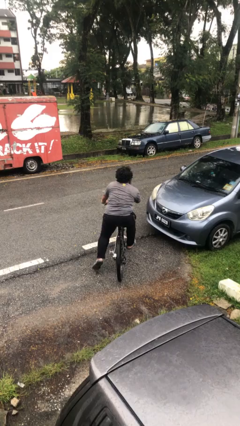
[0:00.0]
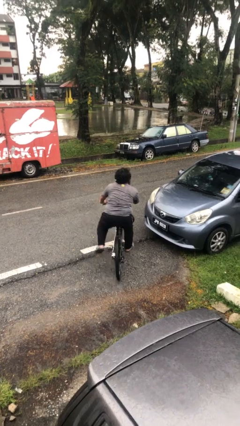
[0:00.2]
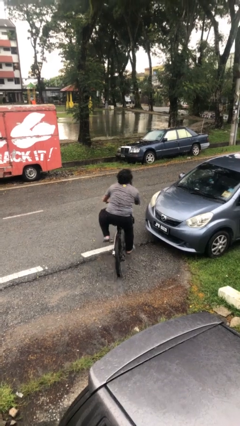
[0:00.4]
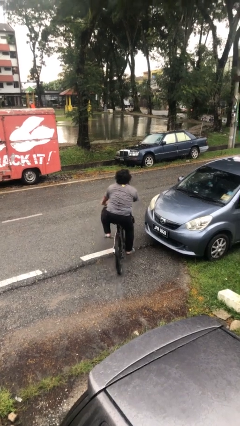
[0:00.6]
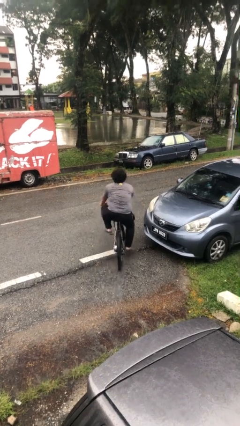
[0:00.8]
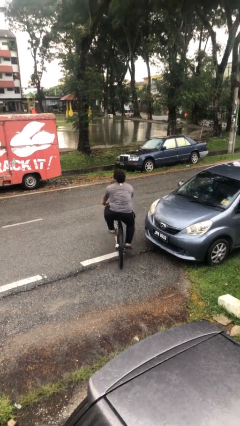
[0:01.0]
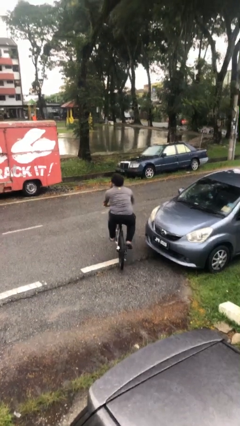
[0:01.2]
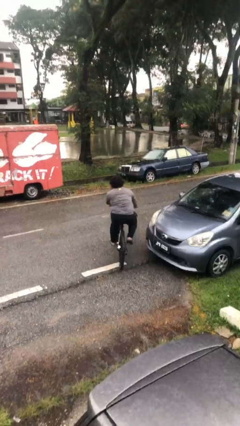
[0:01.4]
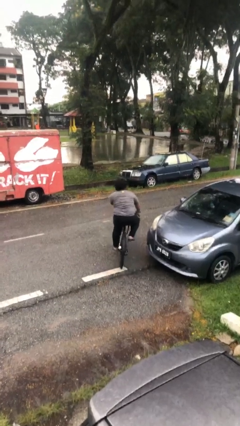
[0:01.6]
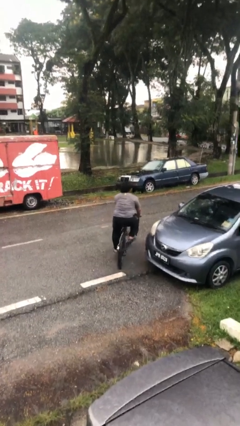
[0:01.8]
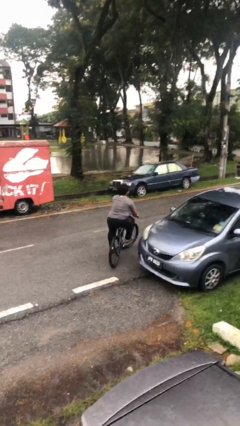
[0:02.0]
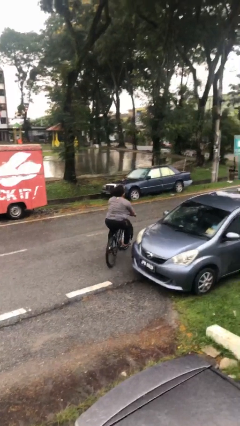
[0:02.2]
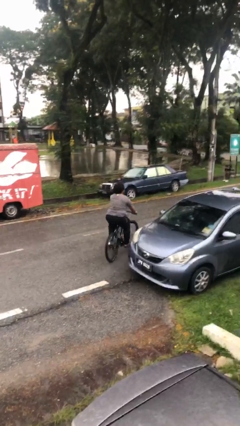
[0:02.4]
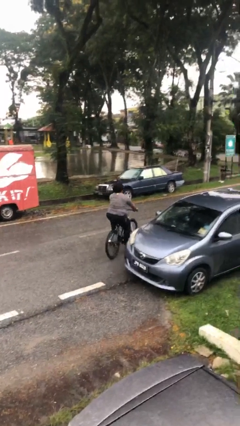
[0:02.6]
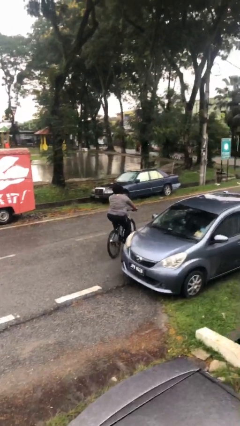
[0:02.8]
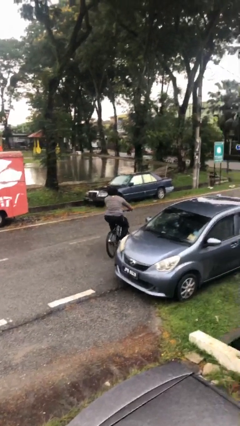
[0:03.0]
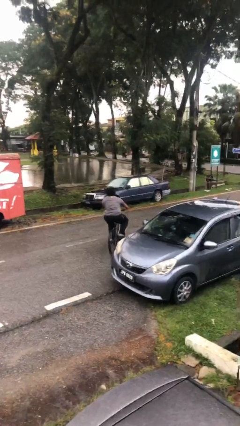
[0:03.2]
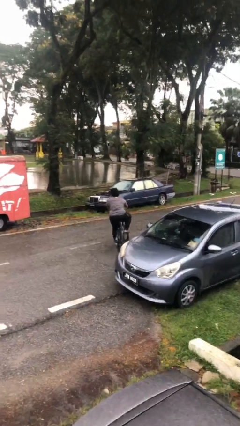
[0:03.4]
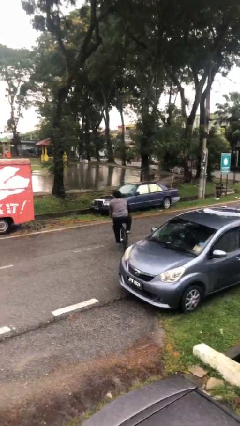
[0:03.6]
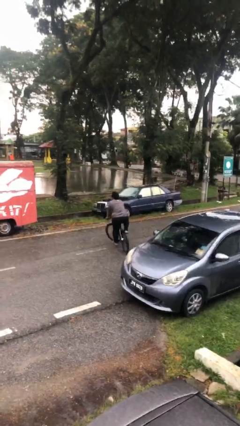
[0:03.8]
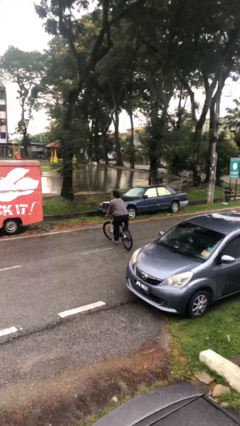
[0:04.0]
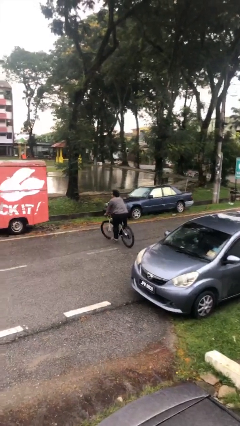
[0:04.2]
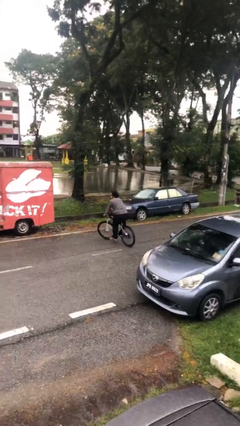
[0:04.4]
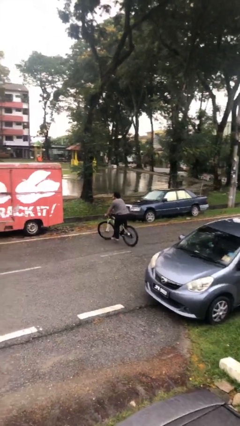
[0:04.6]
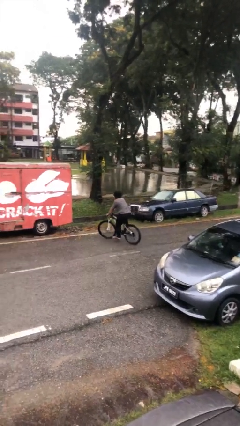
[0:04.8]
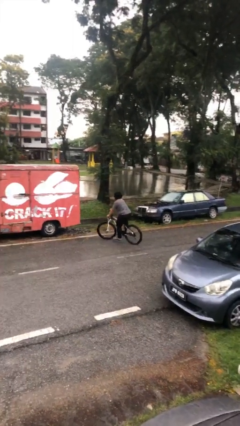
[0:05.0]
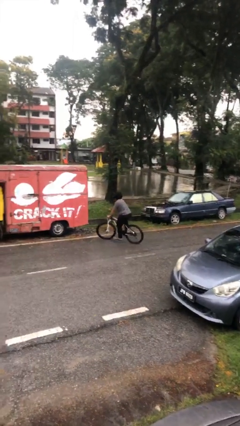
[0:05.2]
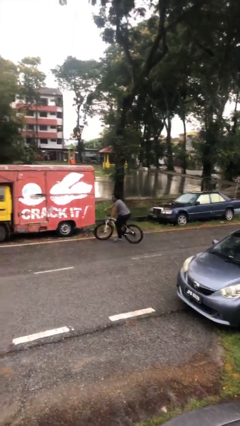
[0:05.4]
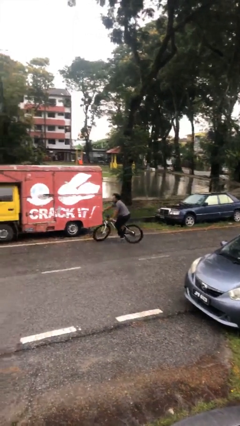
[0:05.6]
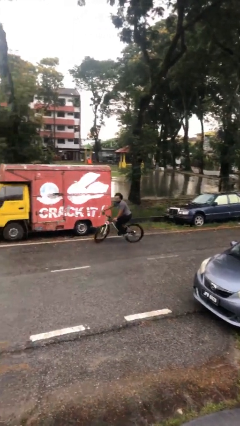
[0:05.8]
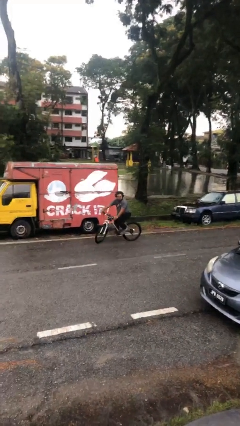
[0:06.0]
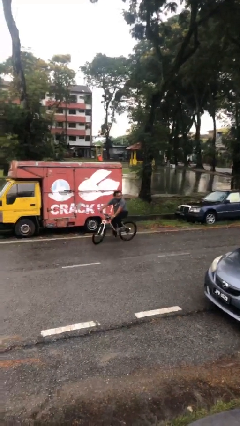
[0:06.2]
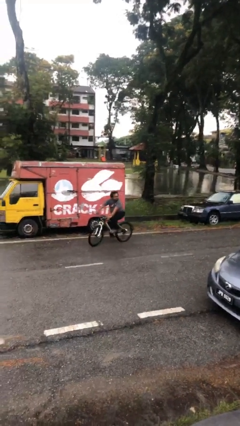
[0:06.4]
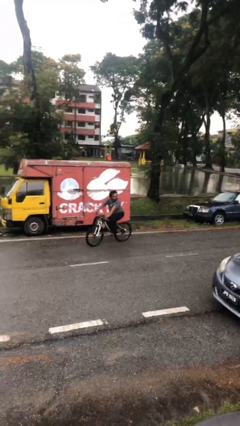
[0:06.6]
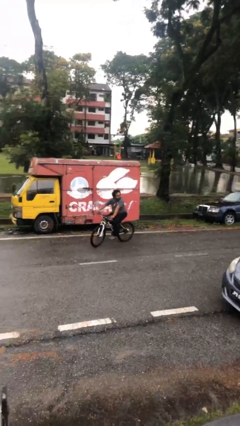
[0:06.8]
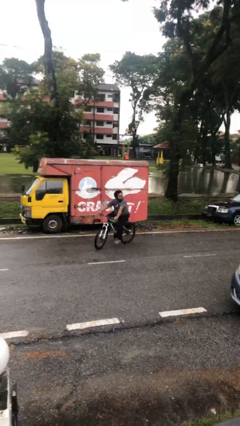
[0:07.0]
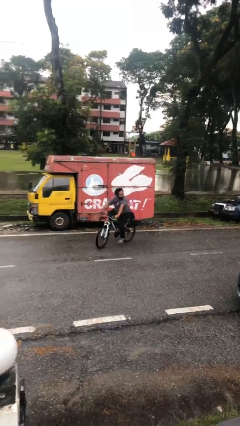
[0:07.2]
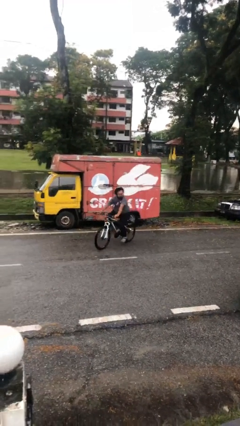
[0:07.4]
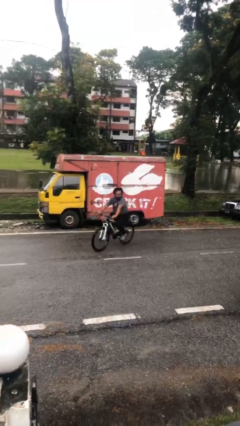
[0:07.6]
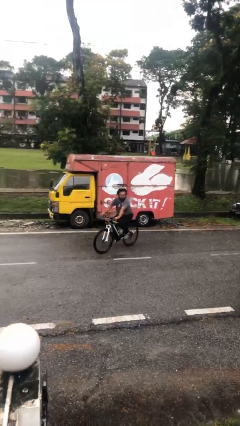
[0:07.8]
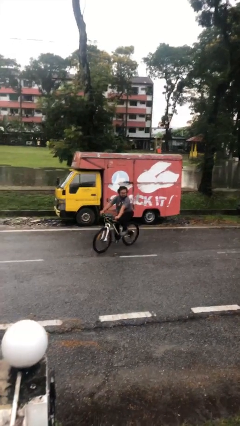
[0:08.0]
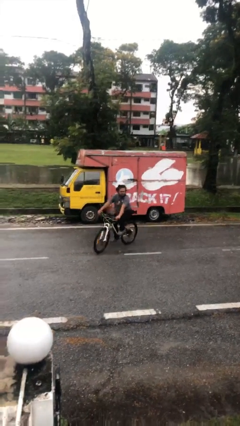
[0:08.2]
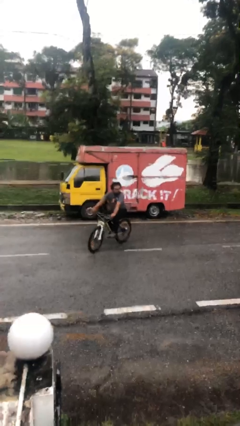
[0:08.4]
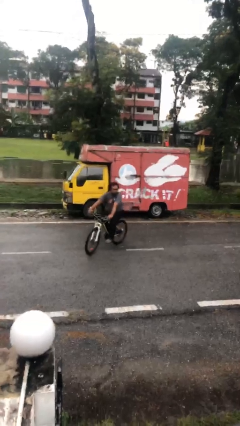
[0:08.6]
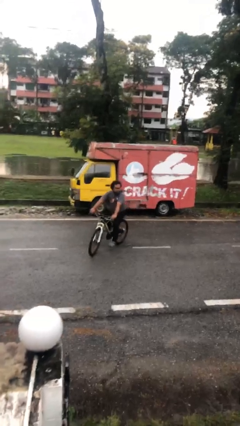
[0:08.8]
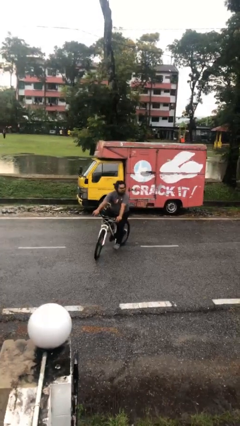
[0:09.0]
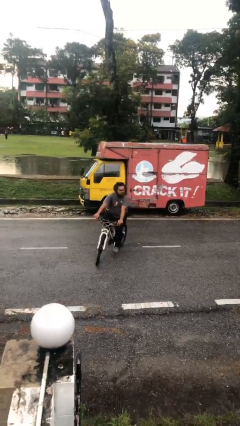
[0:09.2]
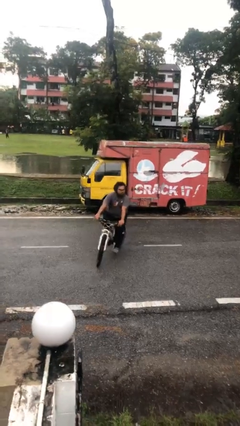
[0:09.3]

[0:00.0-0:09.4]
person rides bicycle

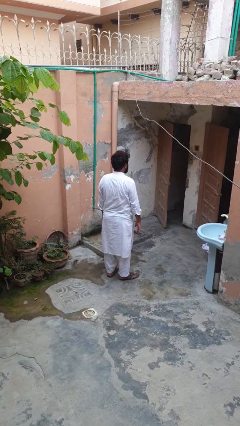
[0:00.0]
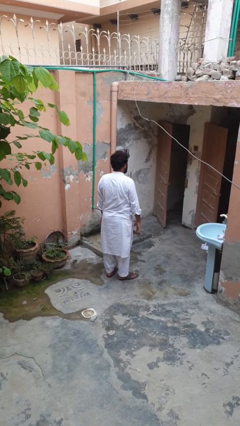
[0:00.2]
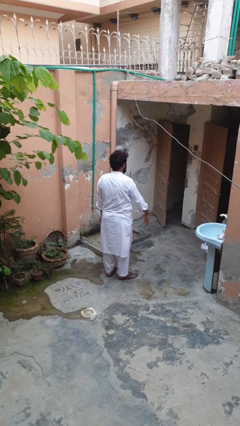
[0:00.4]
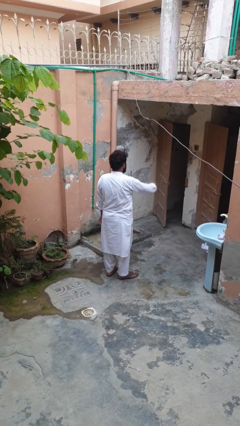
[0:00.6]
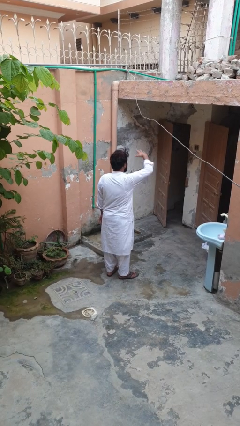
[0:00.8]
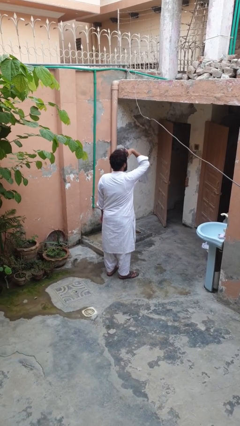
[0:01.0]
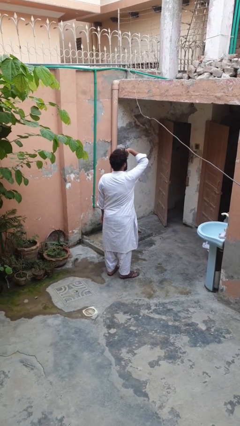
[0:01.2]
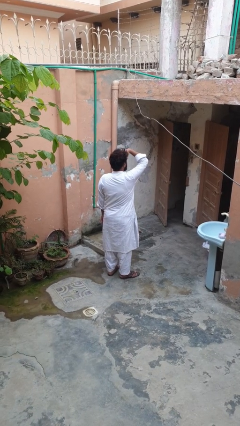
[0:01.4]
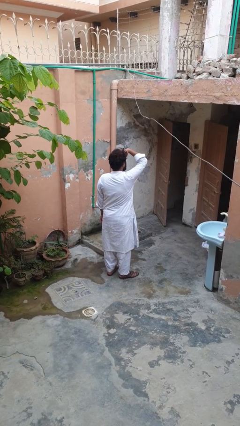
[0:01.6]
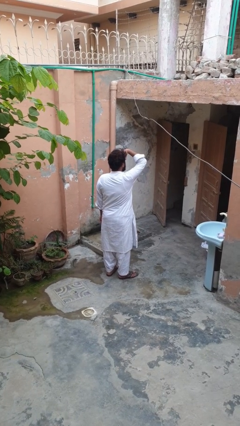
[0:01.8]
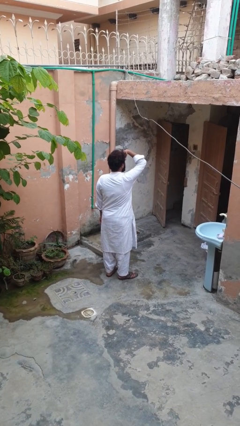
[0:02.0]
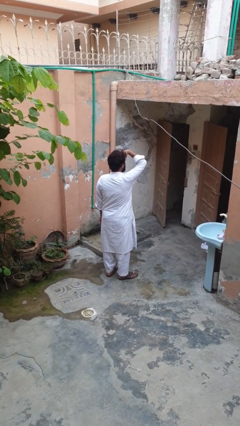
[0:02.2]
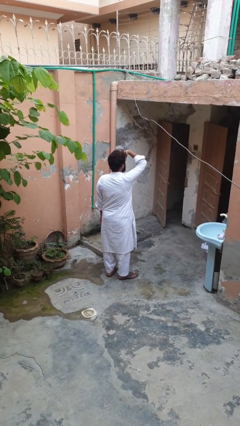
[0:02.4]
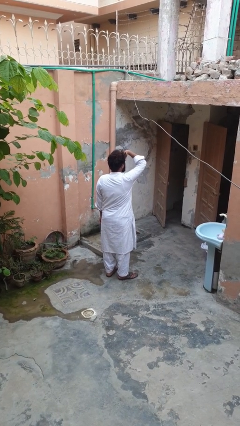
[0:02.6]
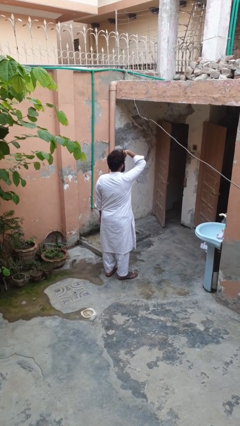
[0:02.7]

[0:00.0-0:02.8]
person shades eyes

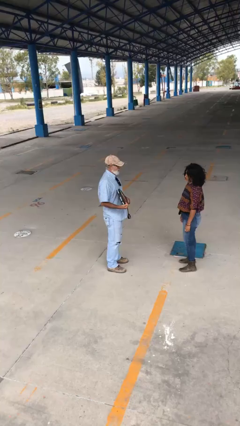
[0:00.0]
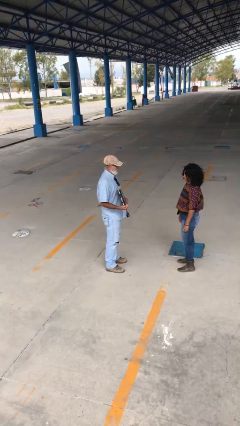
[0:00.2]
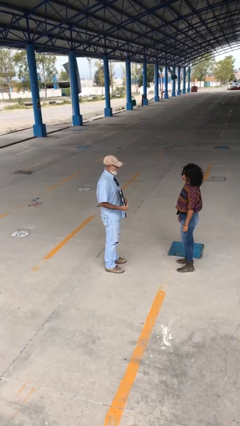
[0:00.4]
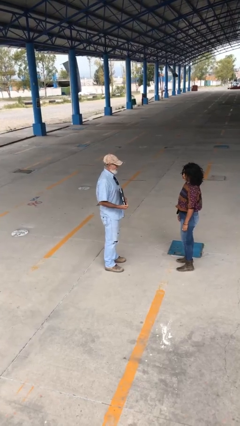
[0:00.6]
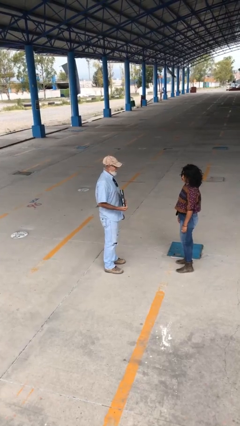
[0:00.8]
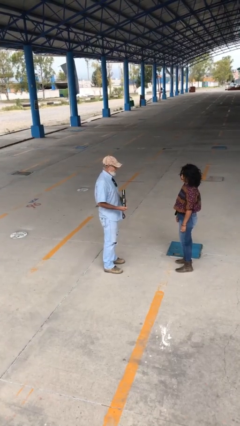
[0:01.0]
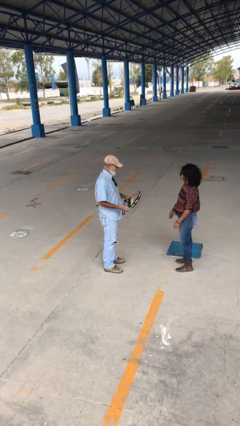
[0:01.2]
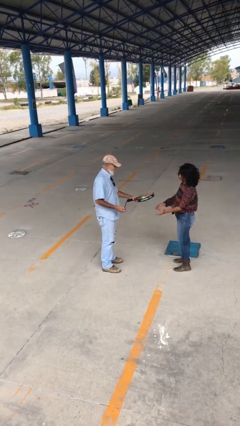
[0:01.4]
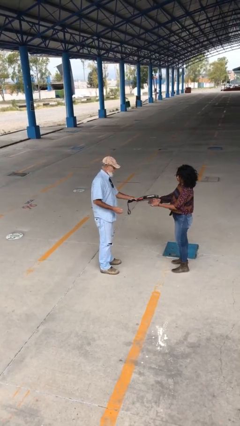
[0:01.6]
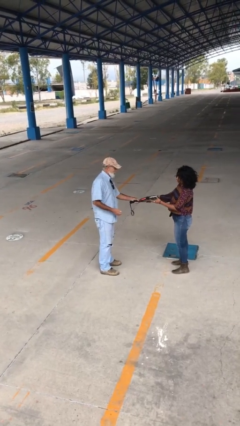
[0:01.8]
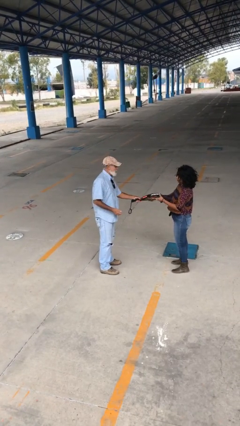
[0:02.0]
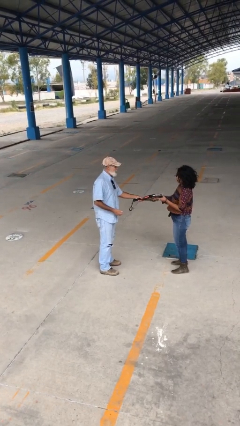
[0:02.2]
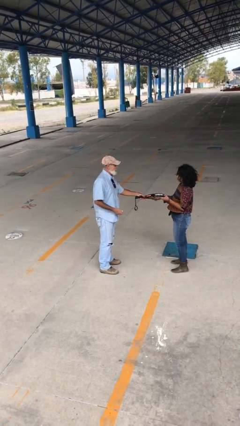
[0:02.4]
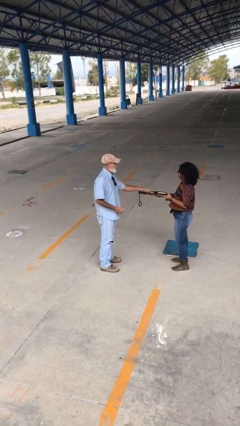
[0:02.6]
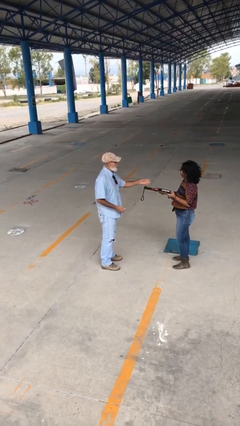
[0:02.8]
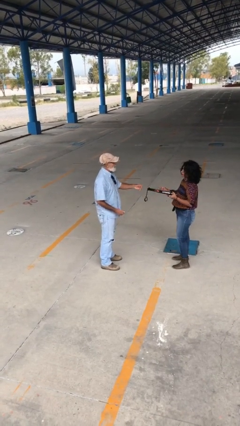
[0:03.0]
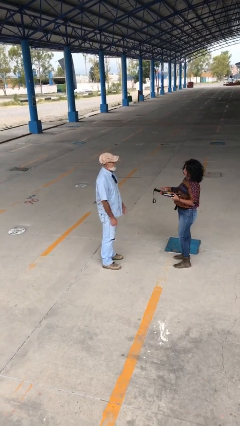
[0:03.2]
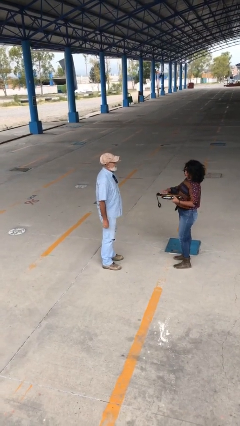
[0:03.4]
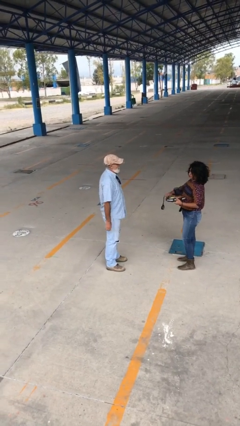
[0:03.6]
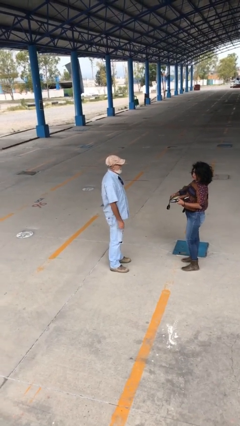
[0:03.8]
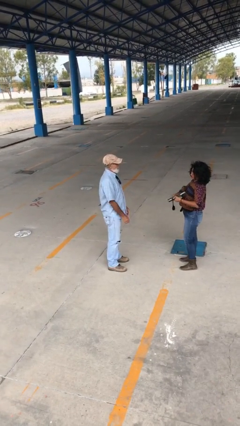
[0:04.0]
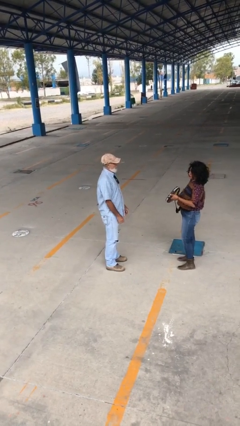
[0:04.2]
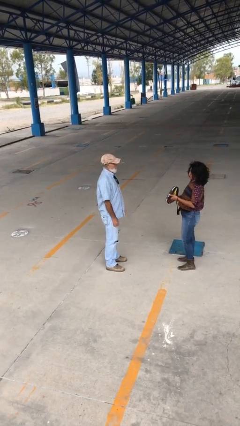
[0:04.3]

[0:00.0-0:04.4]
person transfers object to person

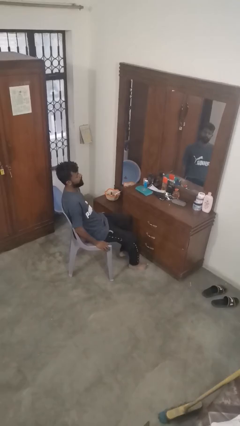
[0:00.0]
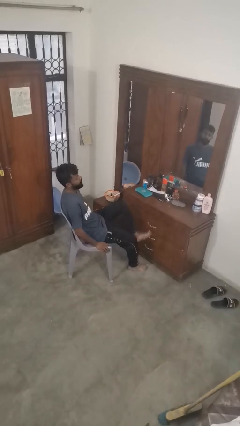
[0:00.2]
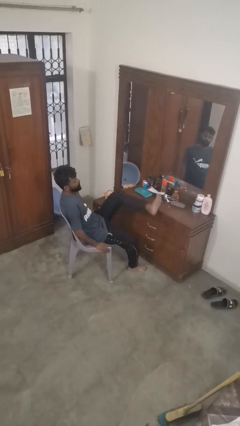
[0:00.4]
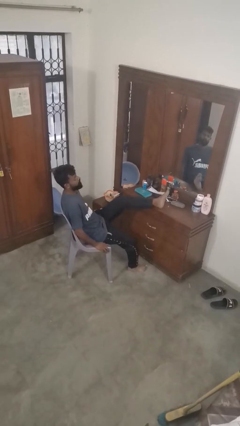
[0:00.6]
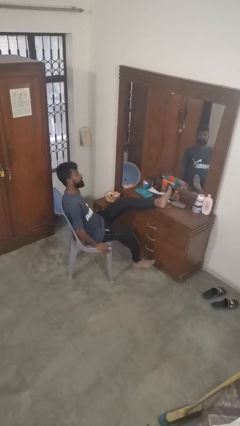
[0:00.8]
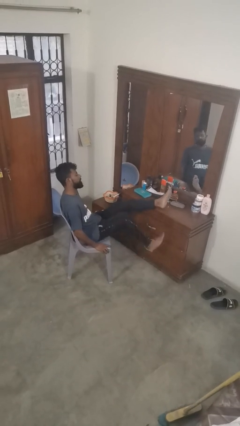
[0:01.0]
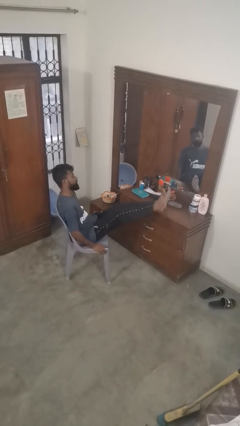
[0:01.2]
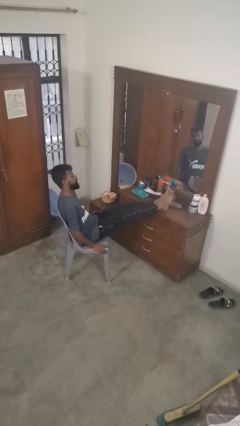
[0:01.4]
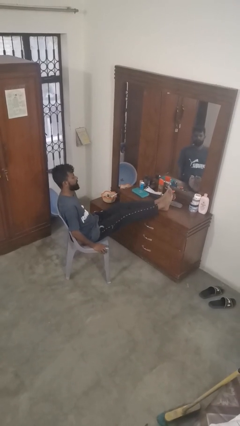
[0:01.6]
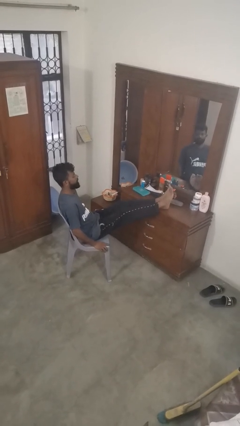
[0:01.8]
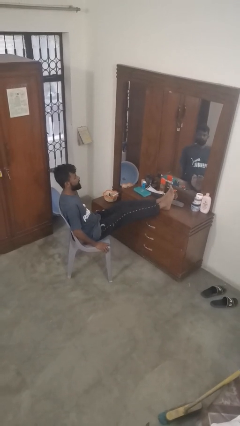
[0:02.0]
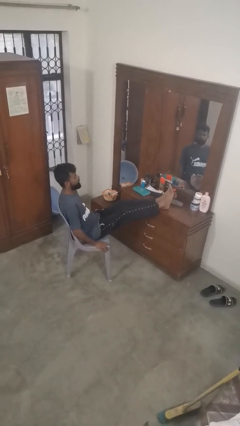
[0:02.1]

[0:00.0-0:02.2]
person puts feet up
